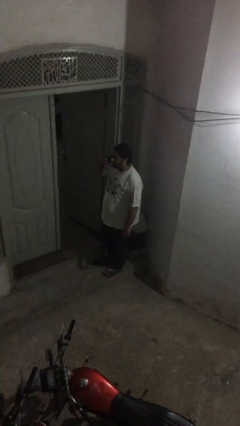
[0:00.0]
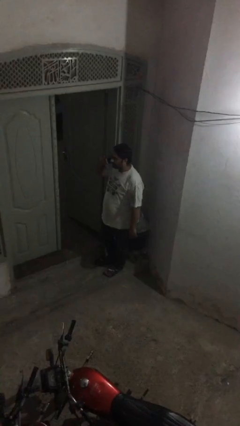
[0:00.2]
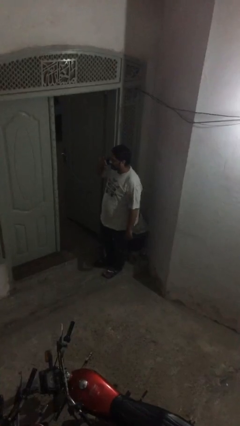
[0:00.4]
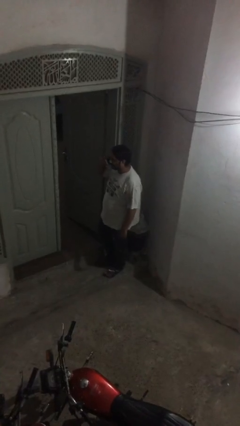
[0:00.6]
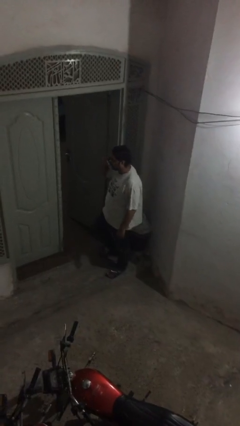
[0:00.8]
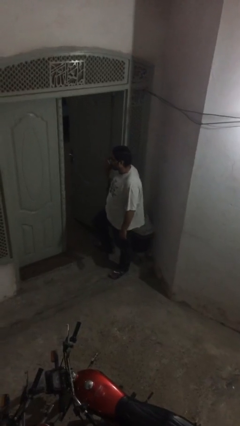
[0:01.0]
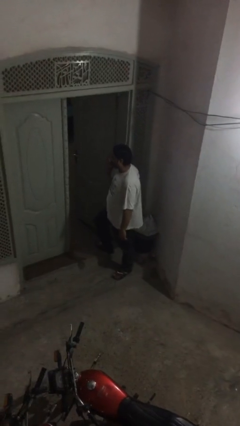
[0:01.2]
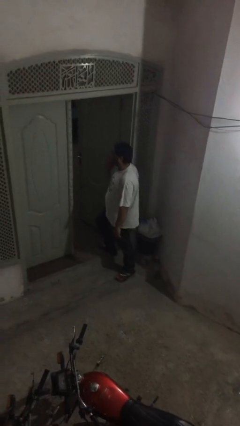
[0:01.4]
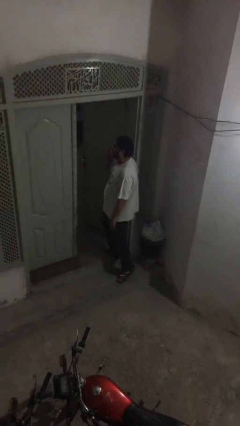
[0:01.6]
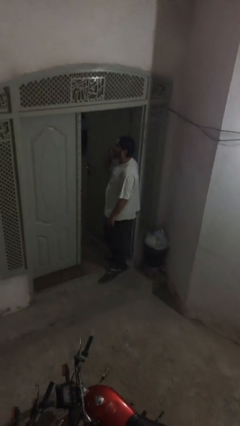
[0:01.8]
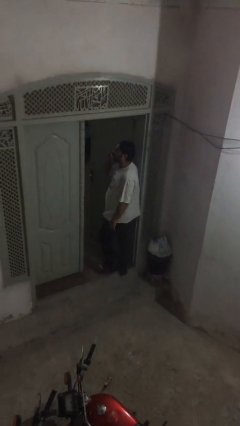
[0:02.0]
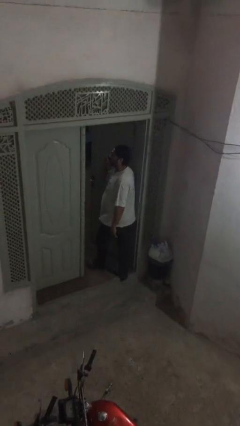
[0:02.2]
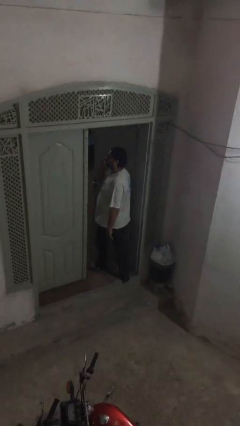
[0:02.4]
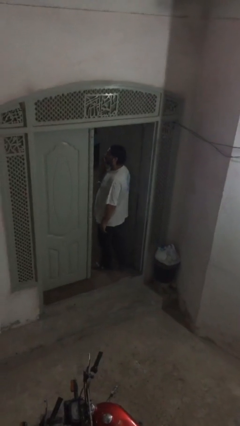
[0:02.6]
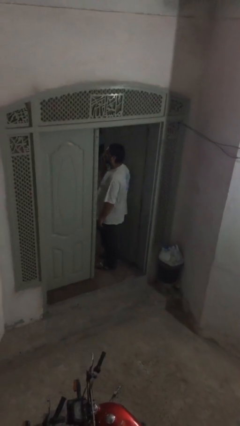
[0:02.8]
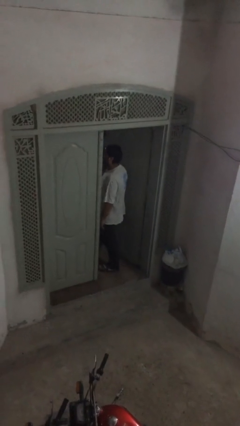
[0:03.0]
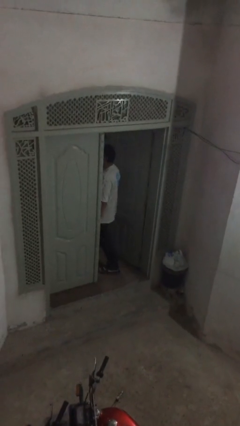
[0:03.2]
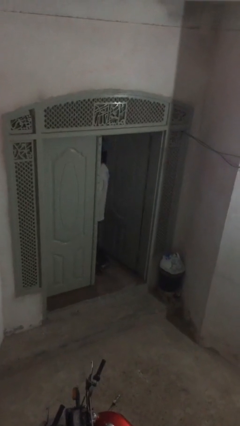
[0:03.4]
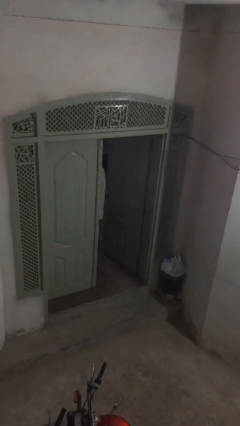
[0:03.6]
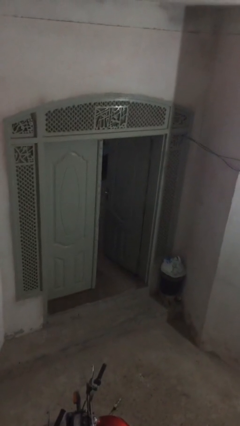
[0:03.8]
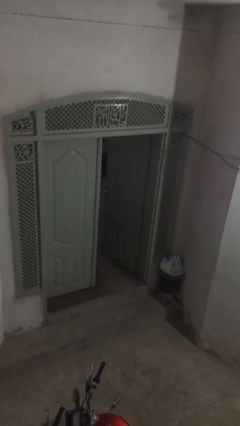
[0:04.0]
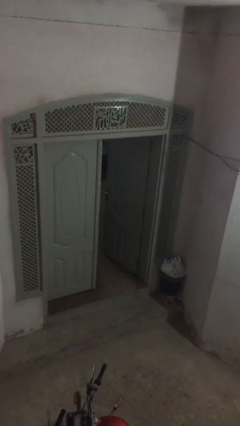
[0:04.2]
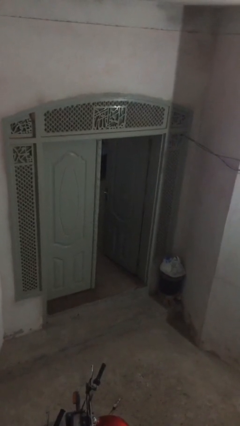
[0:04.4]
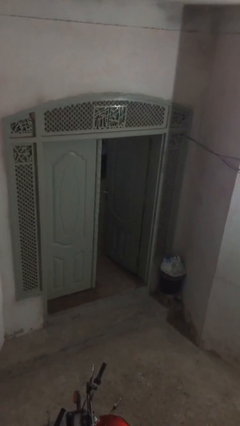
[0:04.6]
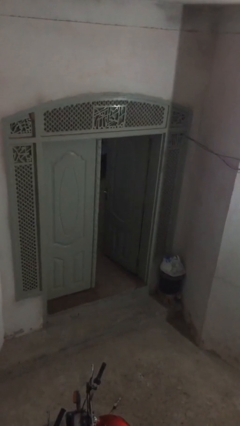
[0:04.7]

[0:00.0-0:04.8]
person exits scene through structure

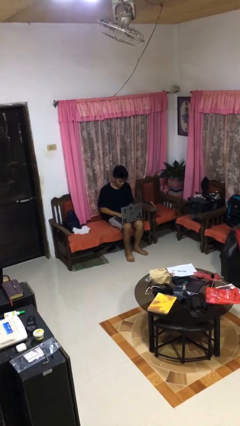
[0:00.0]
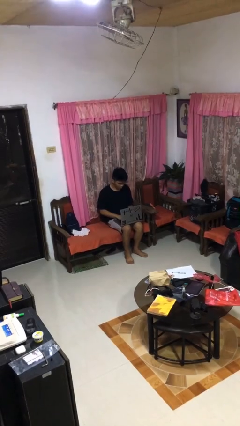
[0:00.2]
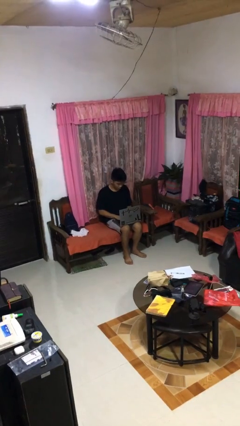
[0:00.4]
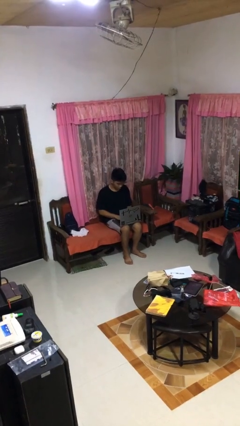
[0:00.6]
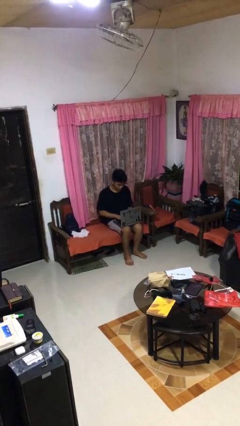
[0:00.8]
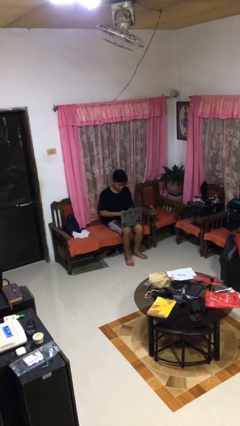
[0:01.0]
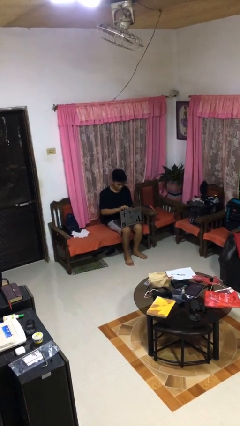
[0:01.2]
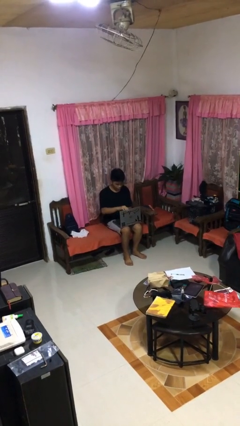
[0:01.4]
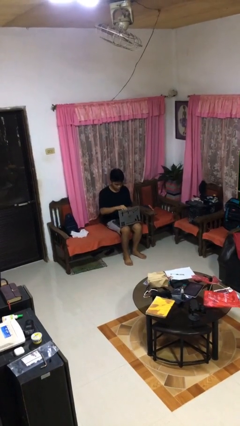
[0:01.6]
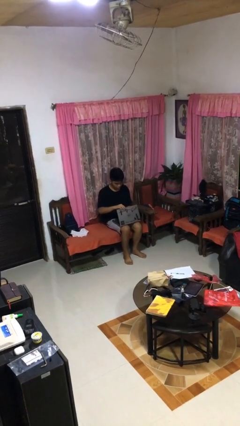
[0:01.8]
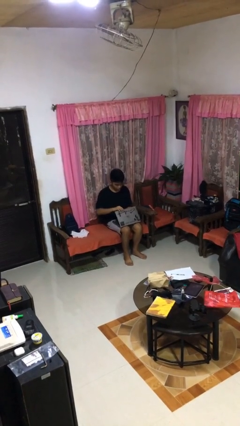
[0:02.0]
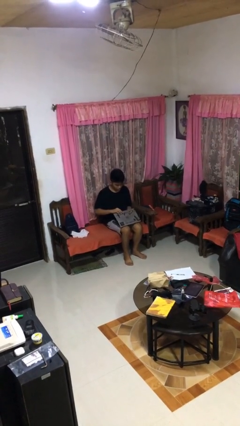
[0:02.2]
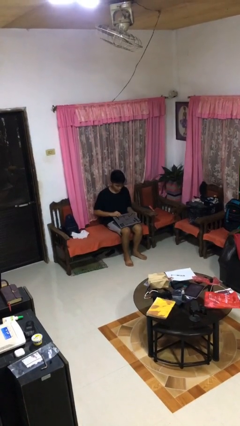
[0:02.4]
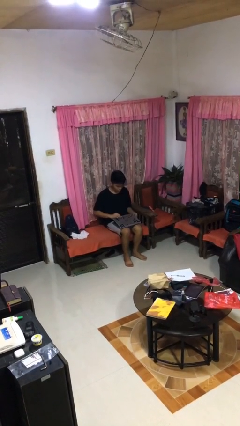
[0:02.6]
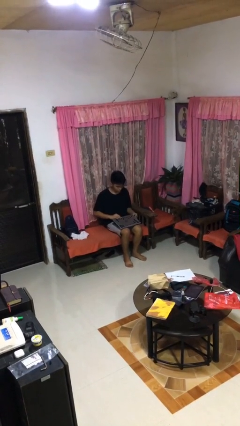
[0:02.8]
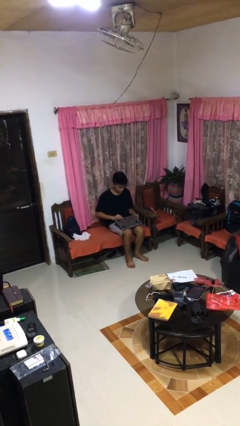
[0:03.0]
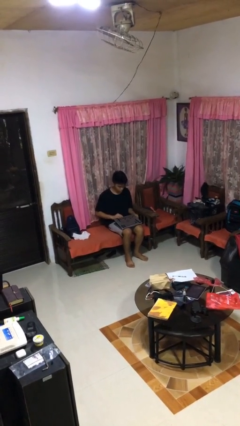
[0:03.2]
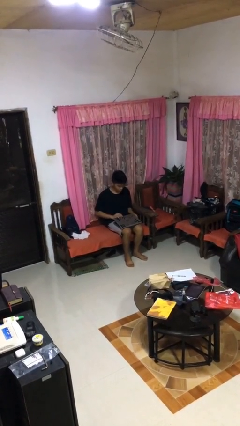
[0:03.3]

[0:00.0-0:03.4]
person closes laptop

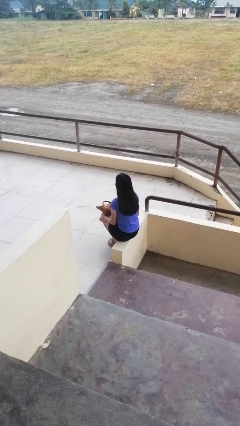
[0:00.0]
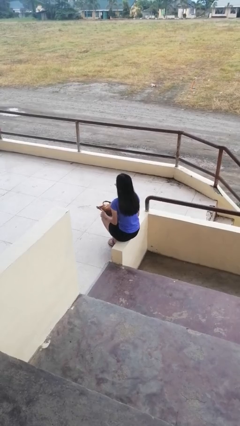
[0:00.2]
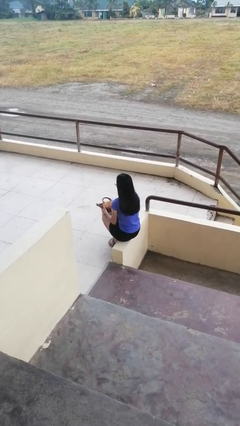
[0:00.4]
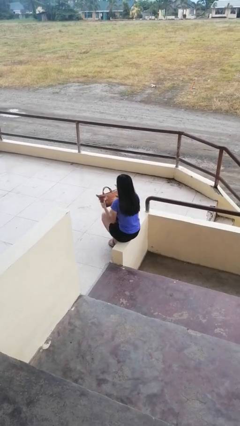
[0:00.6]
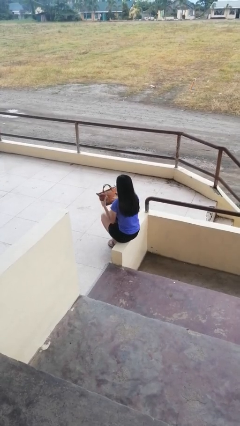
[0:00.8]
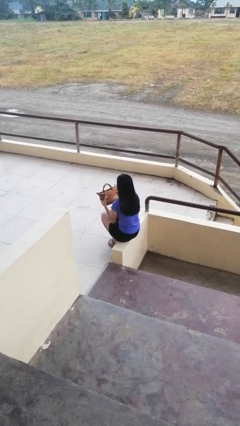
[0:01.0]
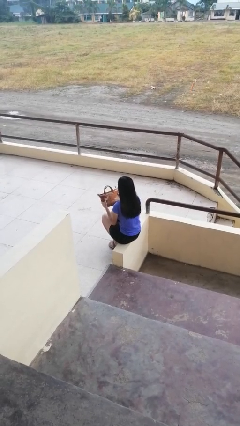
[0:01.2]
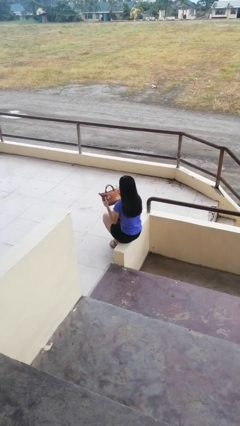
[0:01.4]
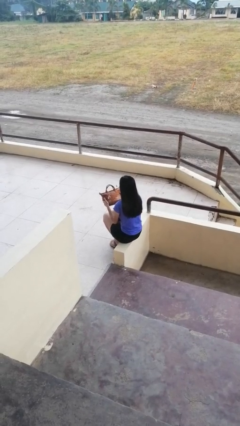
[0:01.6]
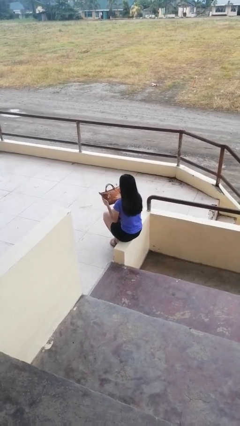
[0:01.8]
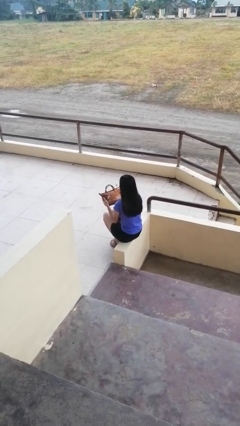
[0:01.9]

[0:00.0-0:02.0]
person taps object with finger

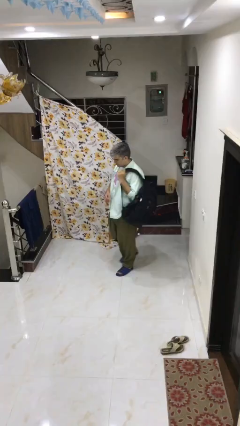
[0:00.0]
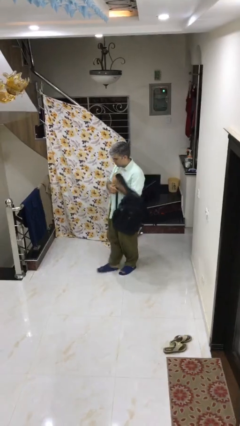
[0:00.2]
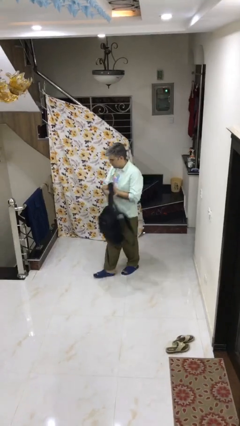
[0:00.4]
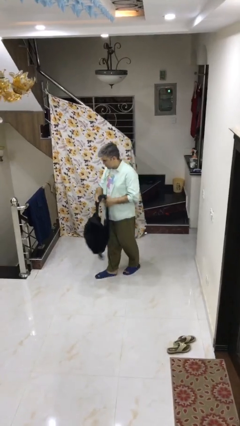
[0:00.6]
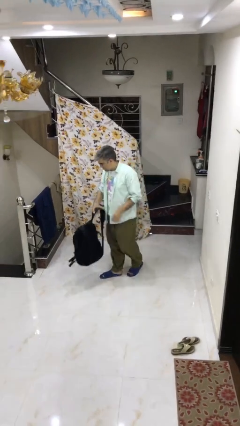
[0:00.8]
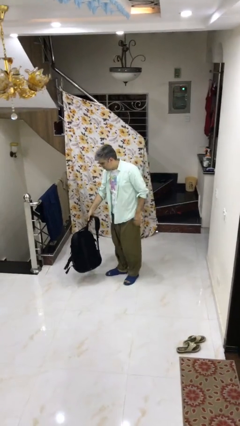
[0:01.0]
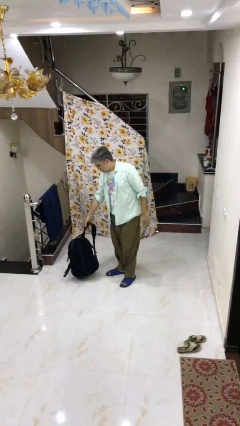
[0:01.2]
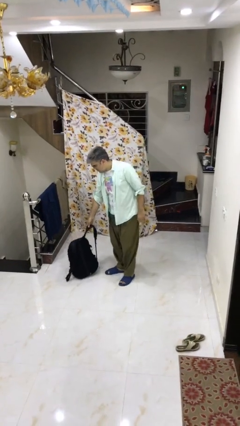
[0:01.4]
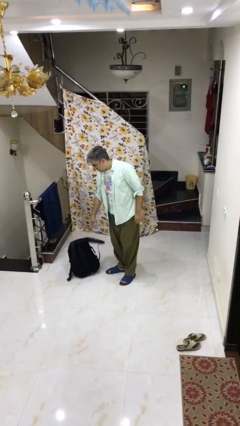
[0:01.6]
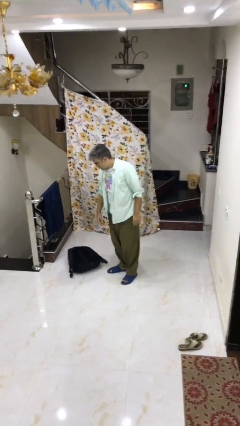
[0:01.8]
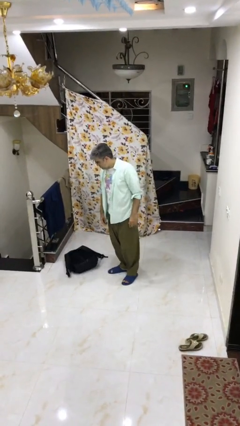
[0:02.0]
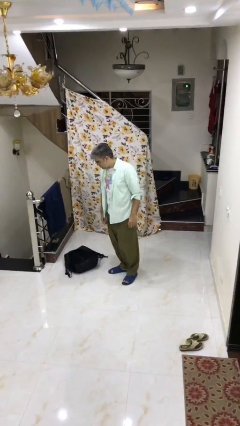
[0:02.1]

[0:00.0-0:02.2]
person puts down object on floor

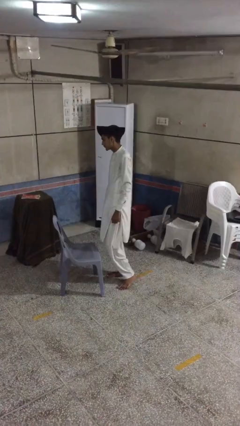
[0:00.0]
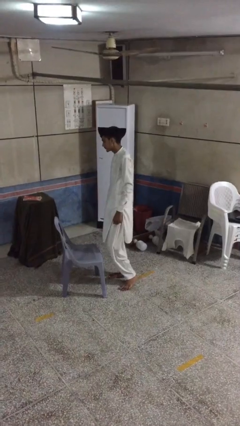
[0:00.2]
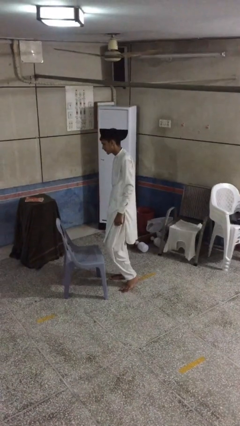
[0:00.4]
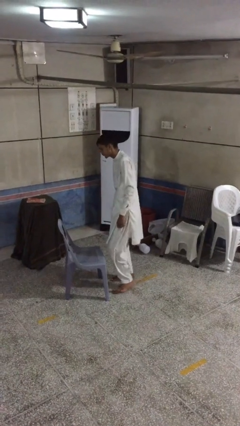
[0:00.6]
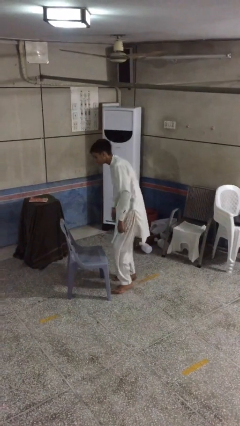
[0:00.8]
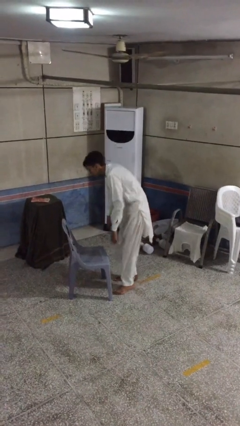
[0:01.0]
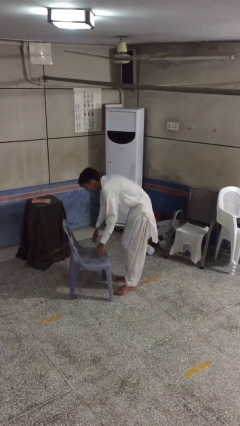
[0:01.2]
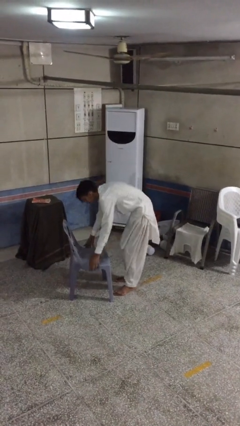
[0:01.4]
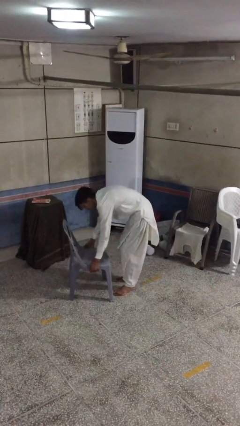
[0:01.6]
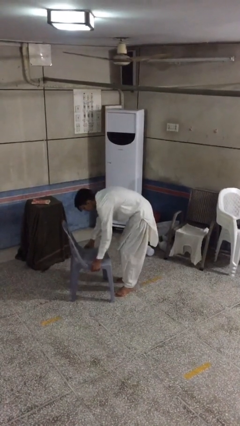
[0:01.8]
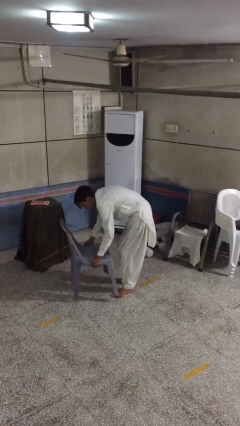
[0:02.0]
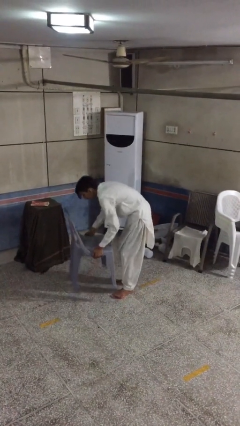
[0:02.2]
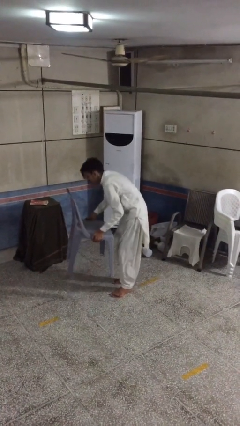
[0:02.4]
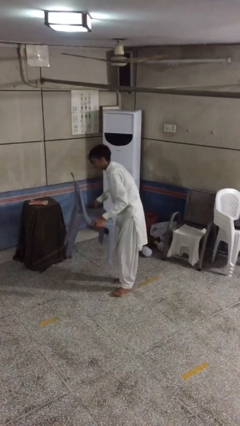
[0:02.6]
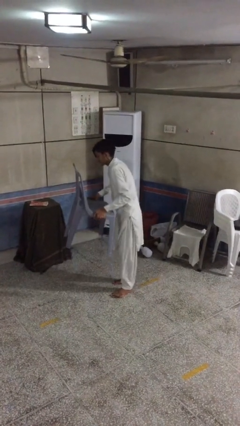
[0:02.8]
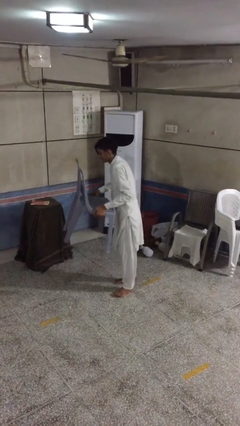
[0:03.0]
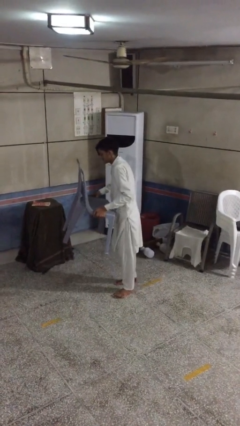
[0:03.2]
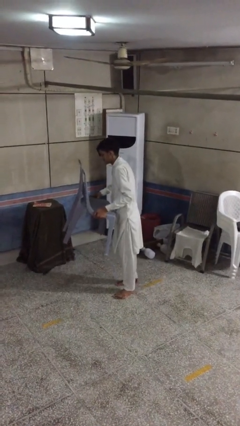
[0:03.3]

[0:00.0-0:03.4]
person picks up object from floor

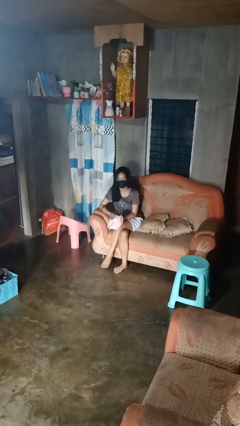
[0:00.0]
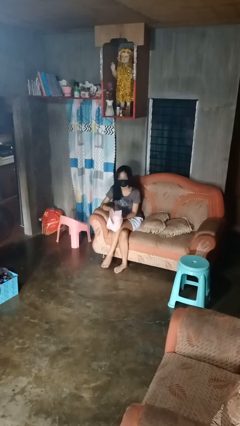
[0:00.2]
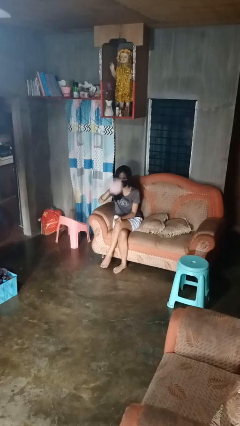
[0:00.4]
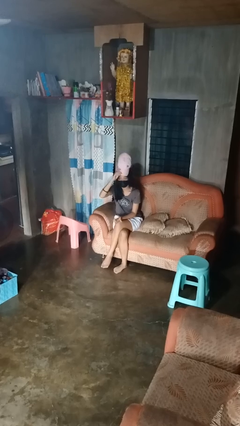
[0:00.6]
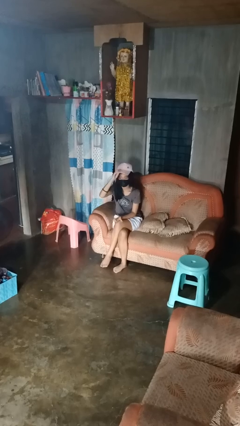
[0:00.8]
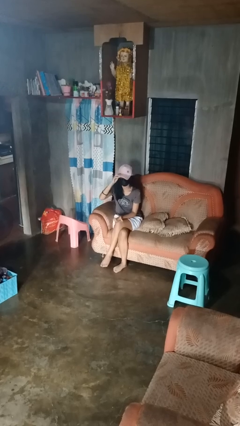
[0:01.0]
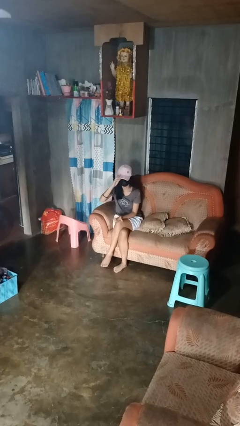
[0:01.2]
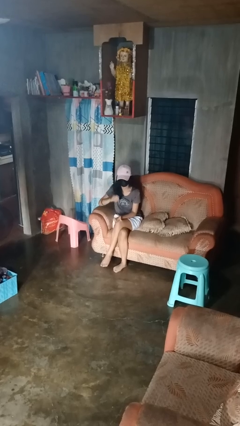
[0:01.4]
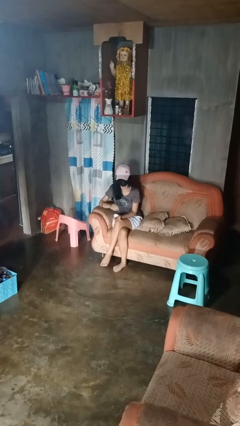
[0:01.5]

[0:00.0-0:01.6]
person puts on hat
